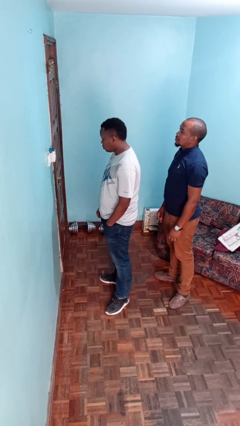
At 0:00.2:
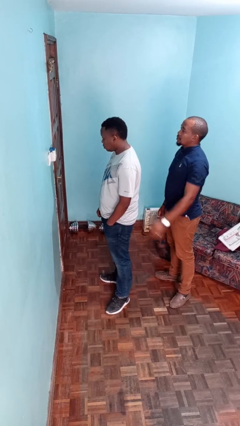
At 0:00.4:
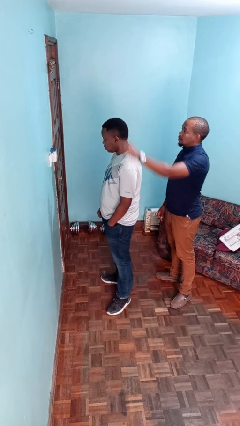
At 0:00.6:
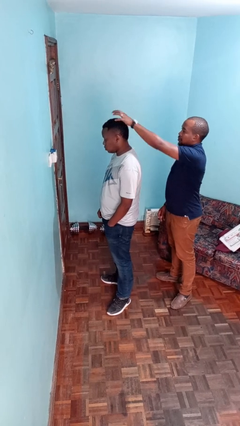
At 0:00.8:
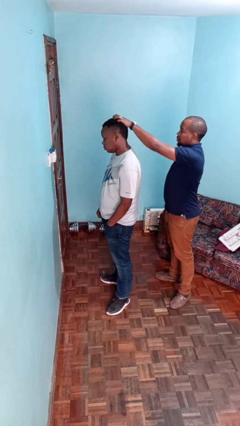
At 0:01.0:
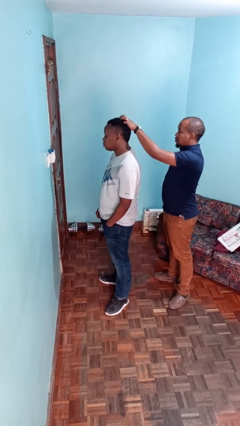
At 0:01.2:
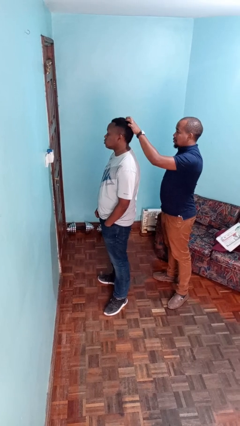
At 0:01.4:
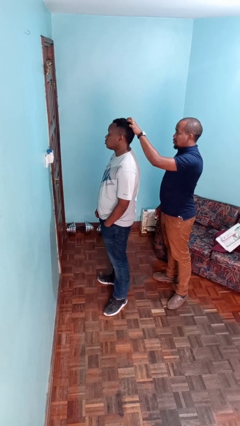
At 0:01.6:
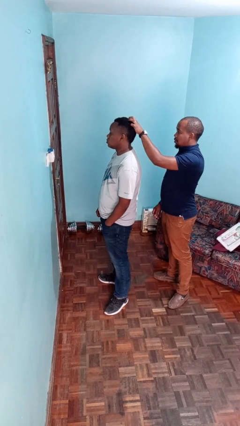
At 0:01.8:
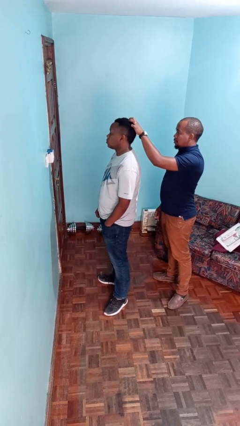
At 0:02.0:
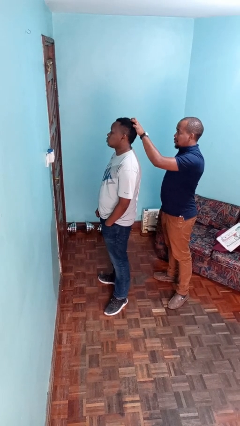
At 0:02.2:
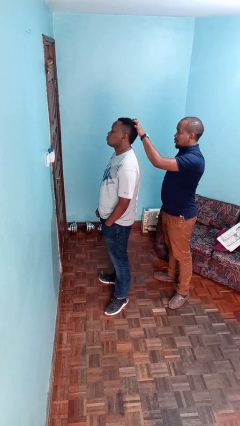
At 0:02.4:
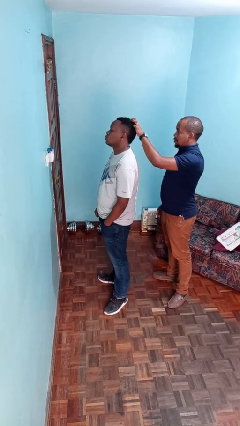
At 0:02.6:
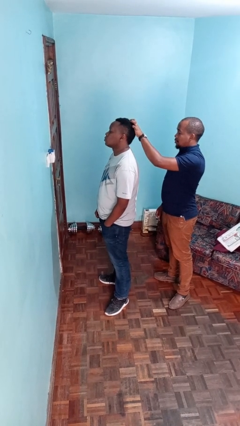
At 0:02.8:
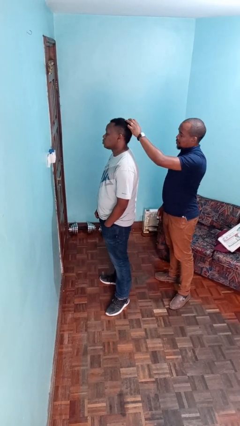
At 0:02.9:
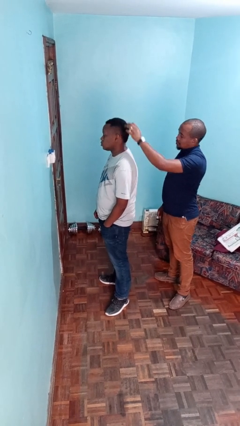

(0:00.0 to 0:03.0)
person grabs person by hair

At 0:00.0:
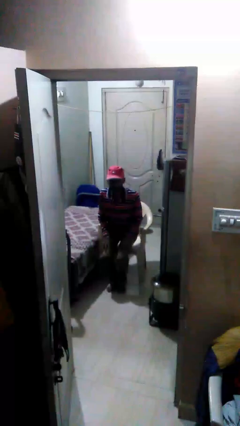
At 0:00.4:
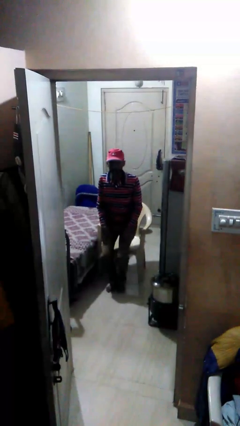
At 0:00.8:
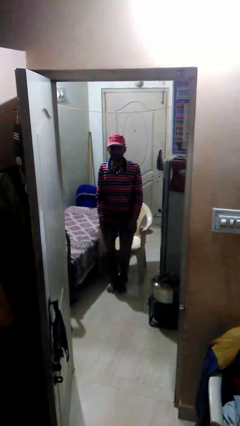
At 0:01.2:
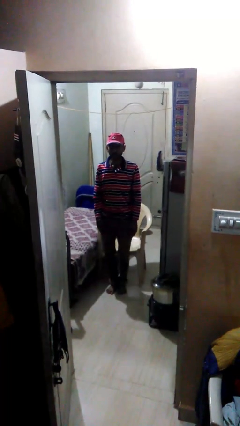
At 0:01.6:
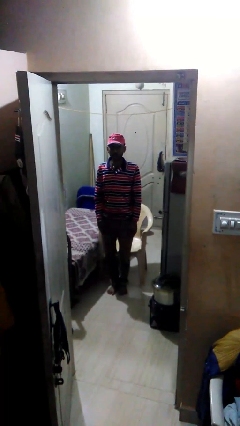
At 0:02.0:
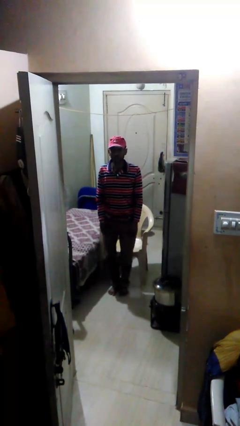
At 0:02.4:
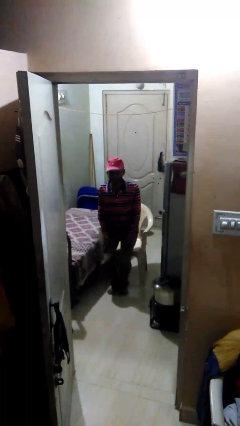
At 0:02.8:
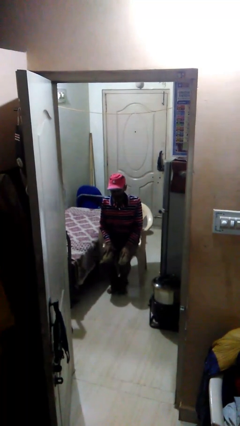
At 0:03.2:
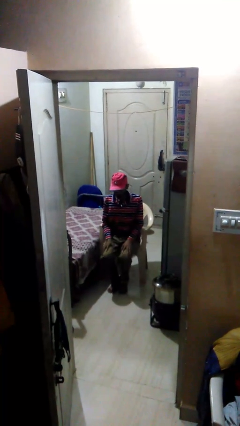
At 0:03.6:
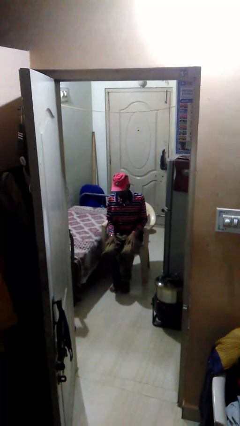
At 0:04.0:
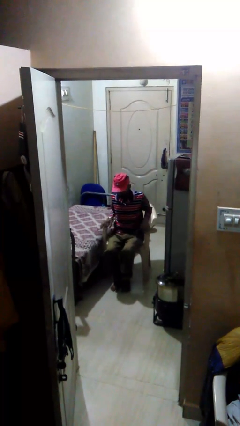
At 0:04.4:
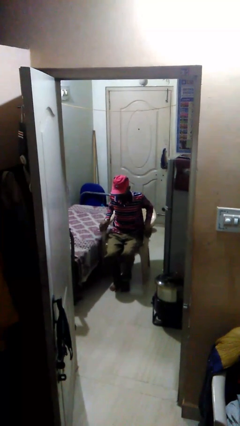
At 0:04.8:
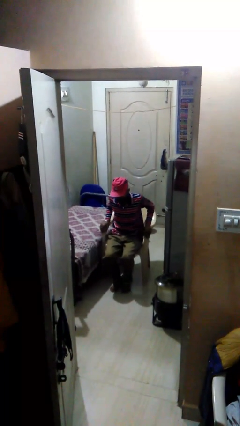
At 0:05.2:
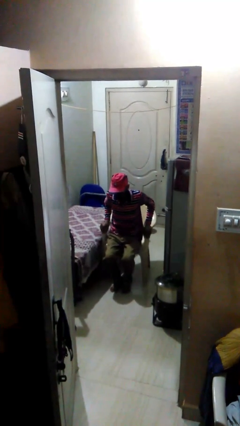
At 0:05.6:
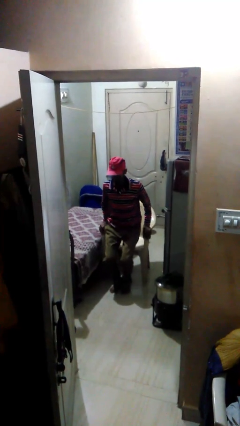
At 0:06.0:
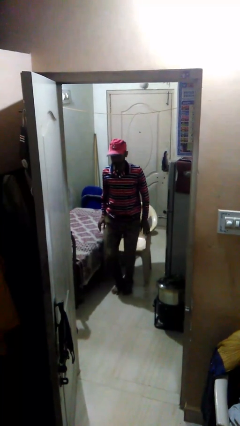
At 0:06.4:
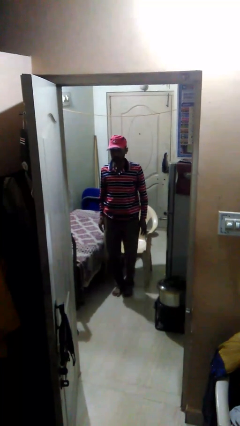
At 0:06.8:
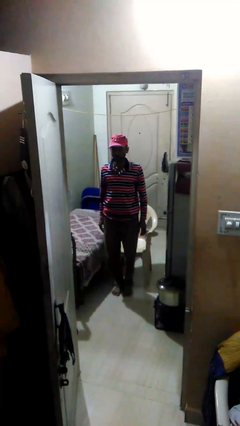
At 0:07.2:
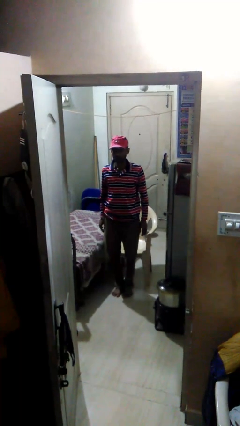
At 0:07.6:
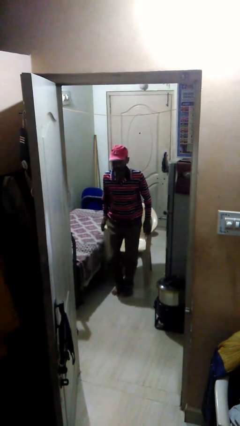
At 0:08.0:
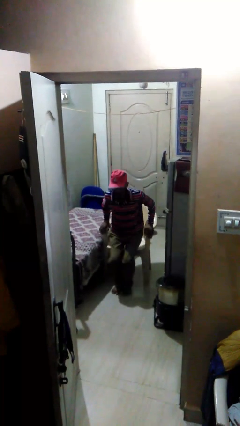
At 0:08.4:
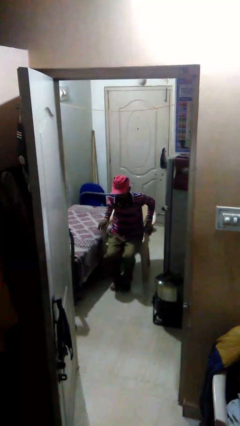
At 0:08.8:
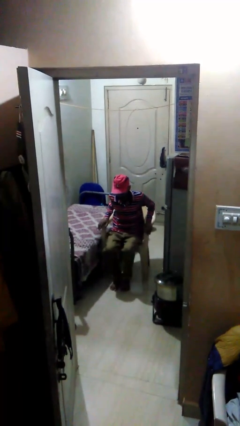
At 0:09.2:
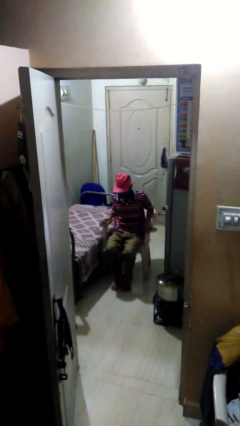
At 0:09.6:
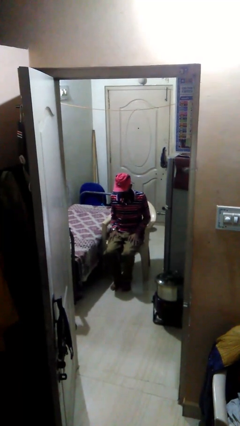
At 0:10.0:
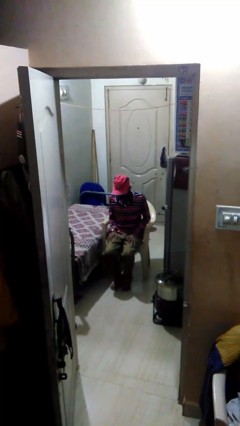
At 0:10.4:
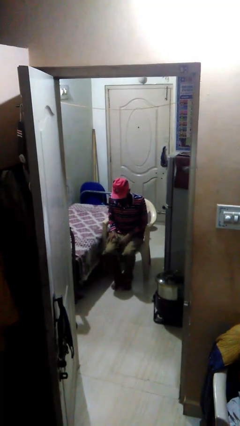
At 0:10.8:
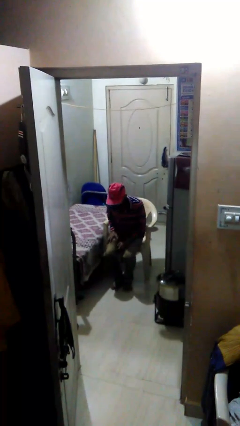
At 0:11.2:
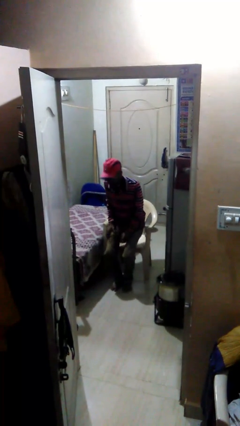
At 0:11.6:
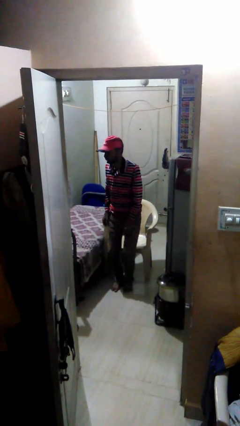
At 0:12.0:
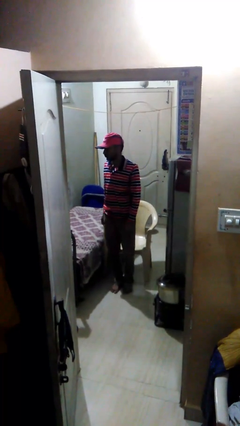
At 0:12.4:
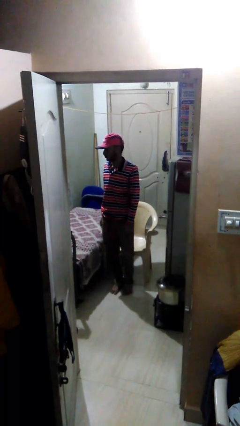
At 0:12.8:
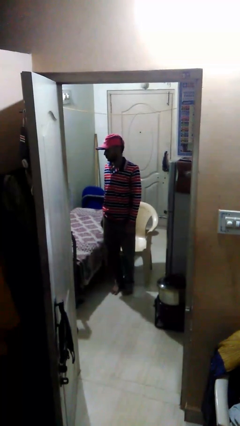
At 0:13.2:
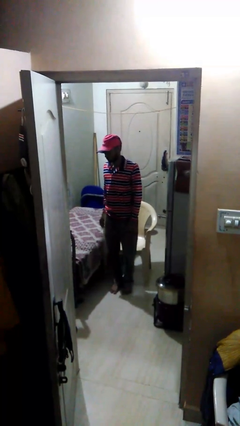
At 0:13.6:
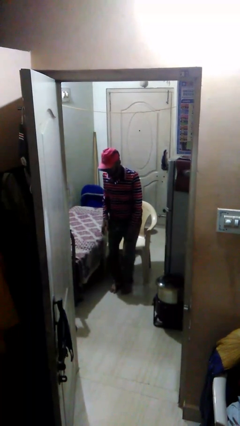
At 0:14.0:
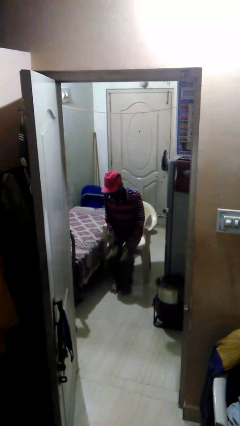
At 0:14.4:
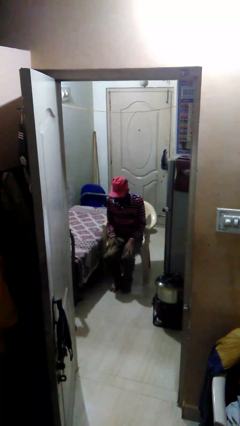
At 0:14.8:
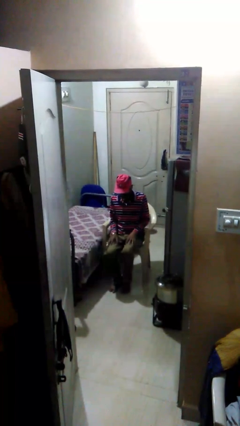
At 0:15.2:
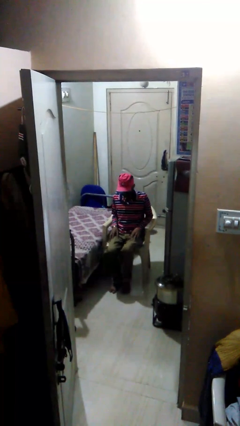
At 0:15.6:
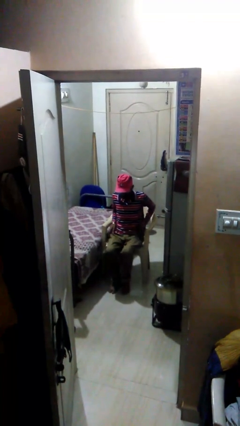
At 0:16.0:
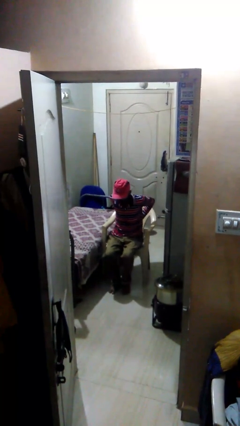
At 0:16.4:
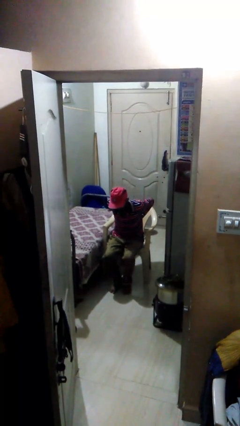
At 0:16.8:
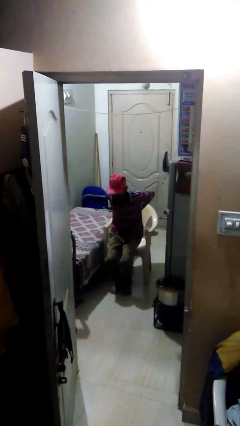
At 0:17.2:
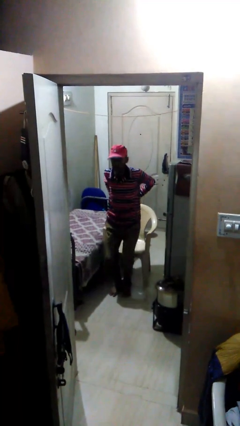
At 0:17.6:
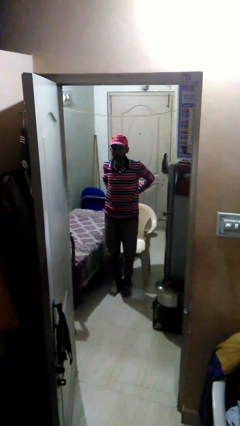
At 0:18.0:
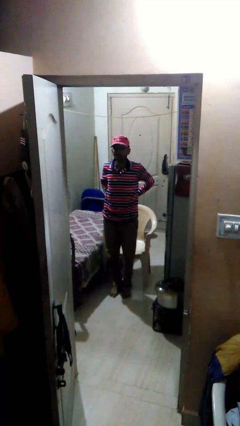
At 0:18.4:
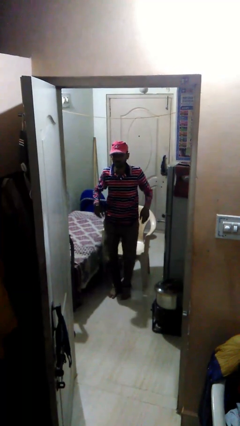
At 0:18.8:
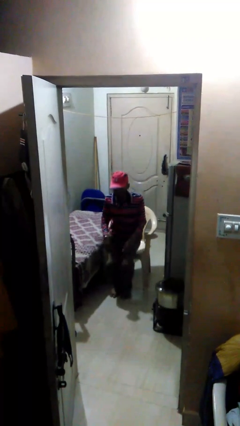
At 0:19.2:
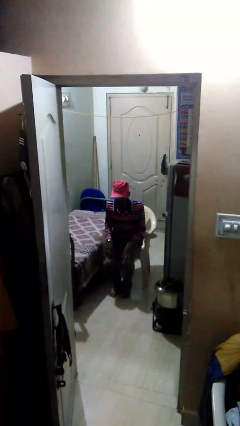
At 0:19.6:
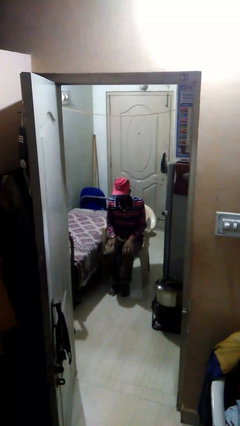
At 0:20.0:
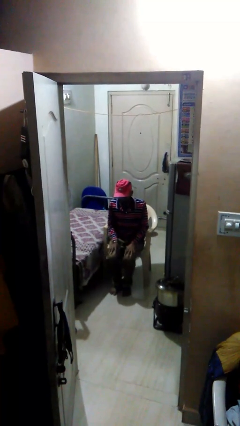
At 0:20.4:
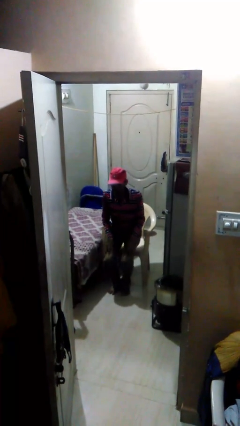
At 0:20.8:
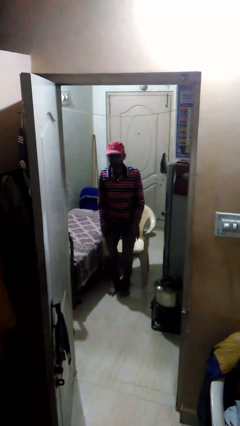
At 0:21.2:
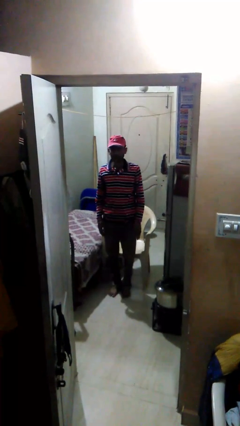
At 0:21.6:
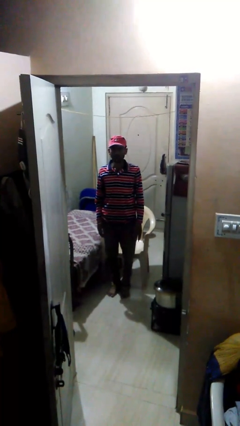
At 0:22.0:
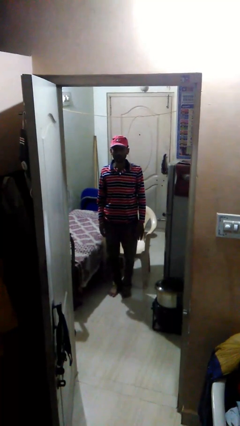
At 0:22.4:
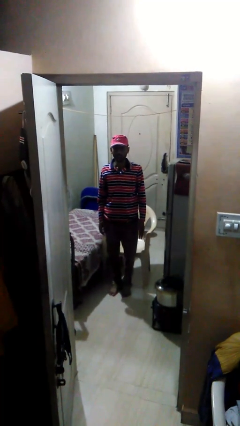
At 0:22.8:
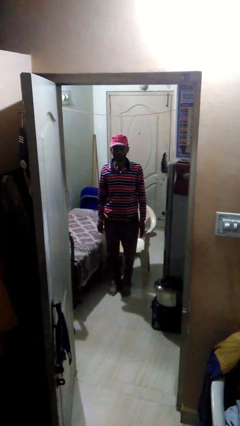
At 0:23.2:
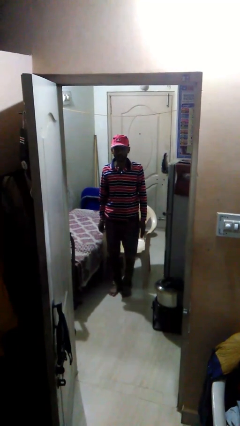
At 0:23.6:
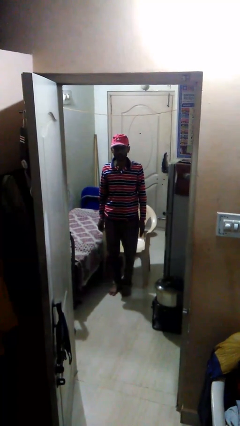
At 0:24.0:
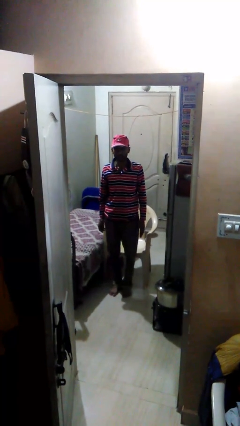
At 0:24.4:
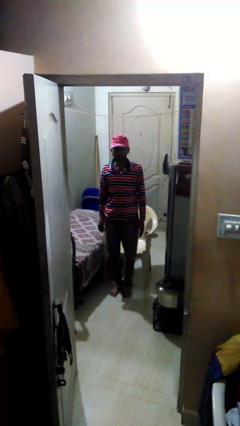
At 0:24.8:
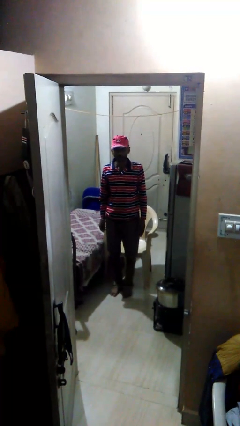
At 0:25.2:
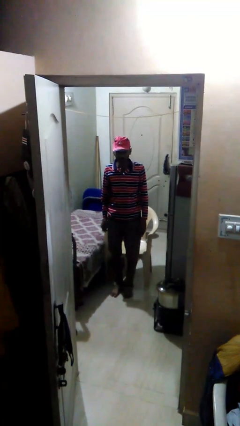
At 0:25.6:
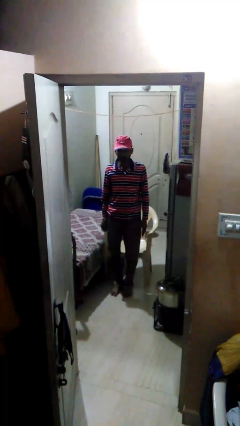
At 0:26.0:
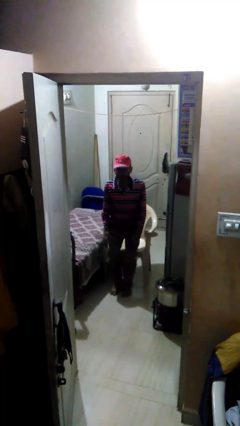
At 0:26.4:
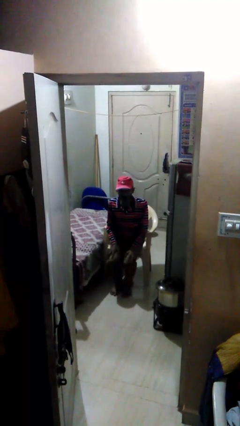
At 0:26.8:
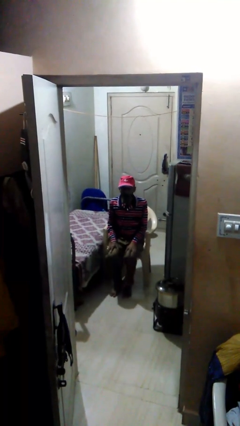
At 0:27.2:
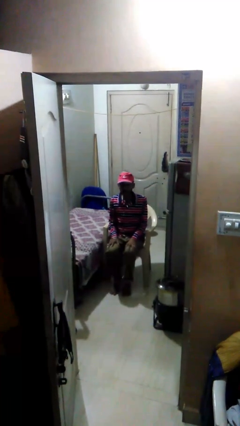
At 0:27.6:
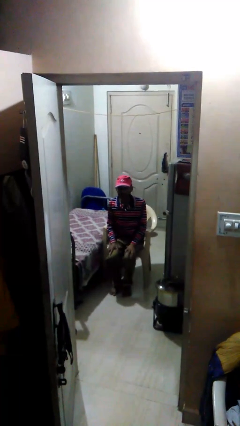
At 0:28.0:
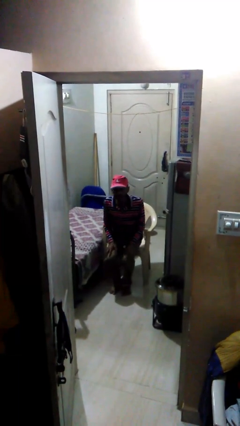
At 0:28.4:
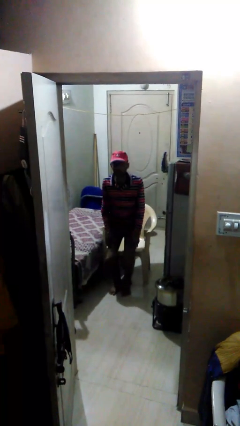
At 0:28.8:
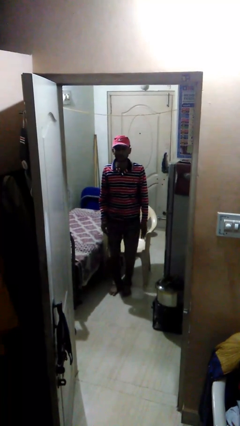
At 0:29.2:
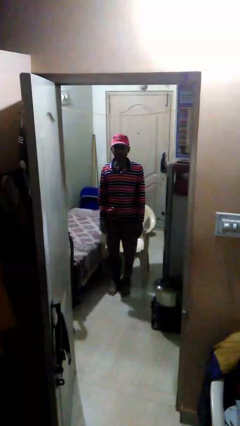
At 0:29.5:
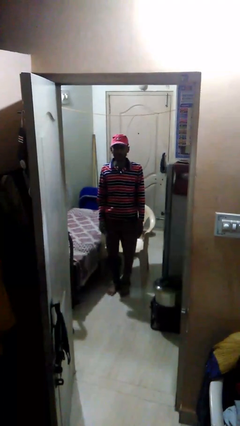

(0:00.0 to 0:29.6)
person stands up

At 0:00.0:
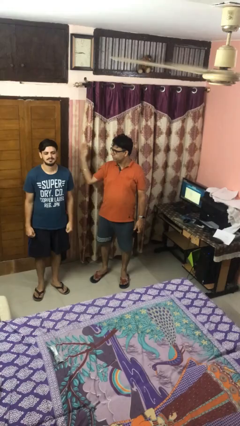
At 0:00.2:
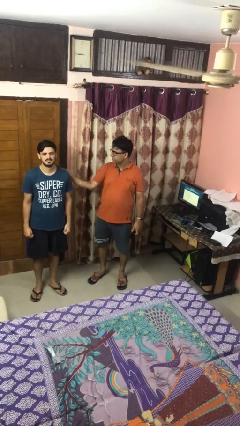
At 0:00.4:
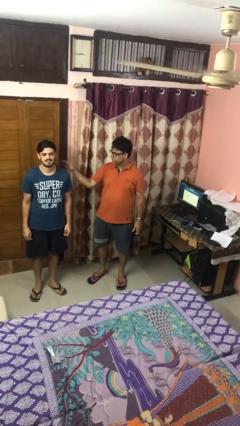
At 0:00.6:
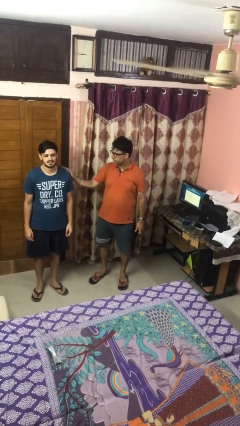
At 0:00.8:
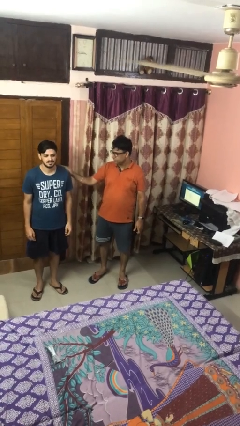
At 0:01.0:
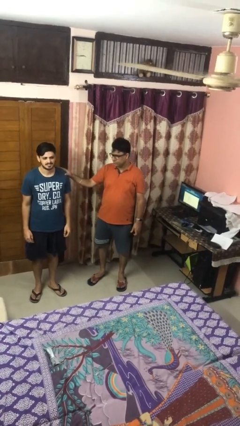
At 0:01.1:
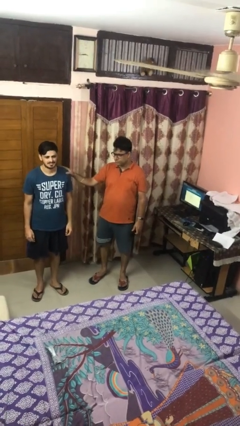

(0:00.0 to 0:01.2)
person pounds shoulders of person
